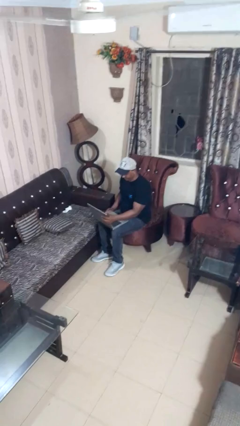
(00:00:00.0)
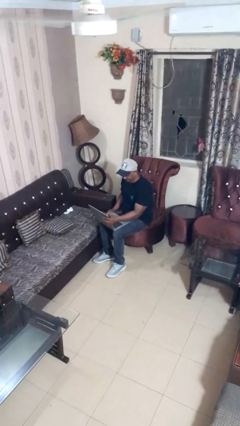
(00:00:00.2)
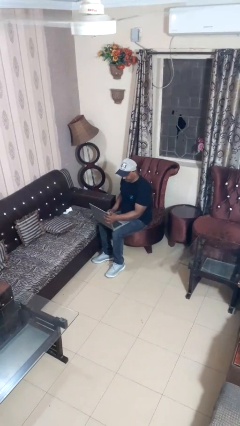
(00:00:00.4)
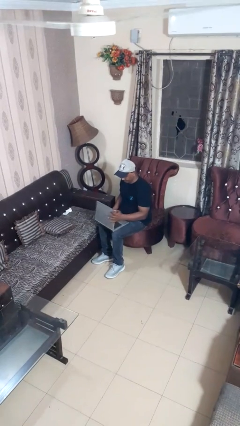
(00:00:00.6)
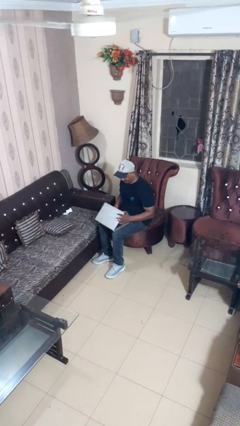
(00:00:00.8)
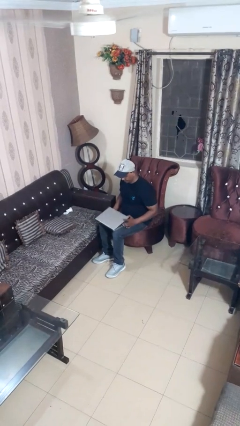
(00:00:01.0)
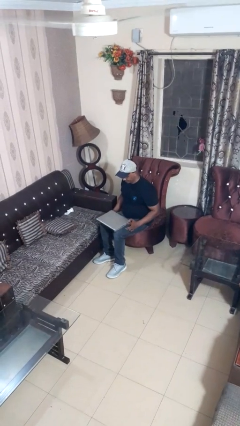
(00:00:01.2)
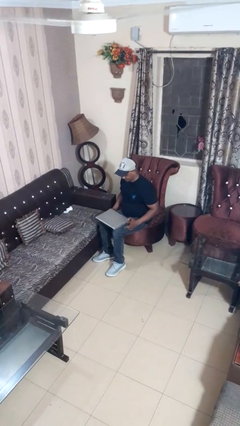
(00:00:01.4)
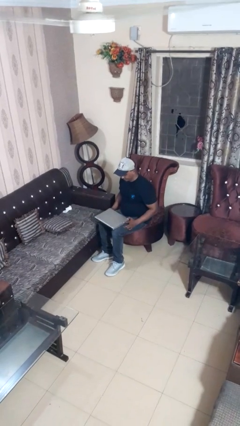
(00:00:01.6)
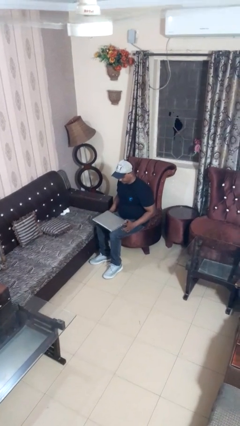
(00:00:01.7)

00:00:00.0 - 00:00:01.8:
person closes laptop

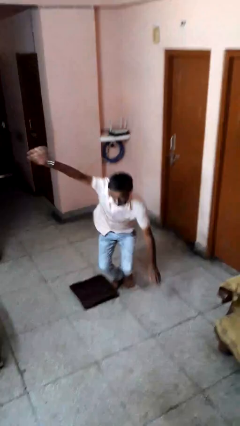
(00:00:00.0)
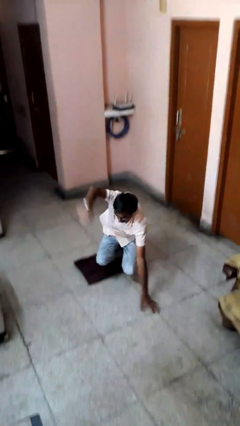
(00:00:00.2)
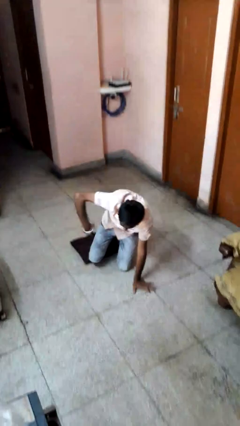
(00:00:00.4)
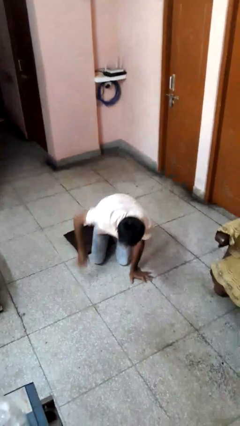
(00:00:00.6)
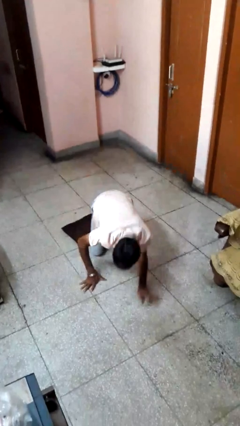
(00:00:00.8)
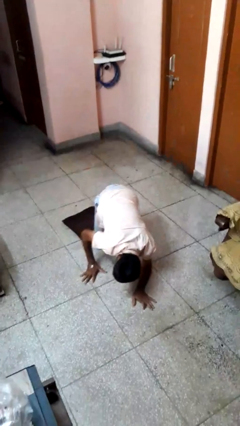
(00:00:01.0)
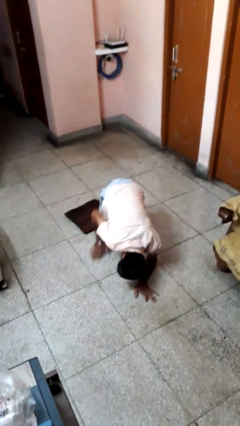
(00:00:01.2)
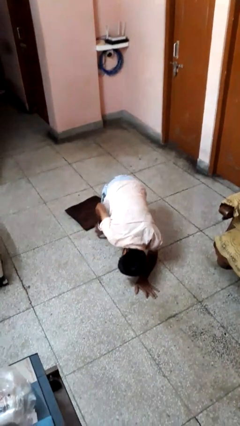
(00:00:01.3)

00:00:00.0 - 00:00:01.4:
person trips on object on floor

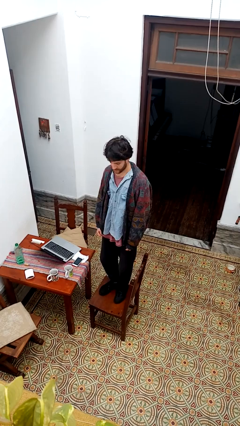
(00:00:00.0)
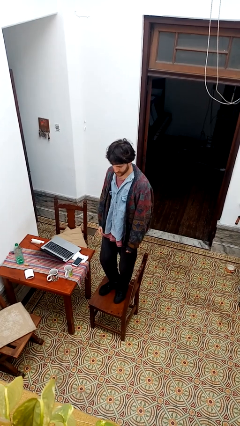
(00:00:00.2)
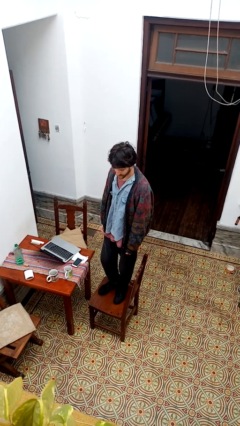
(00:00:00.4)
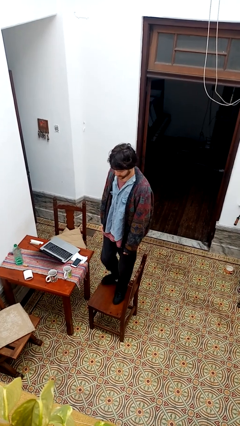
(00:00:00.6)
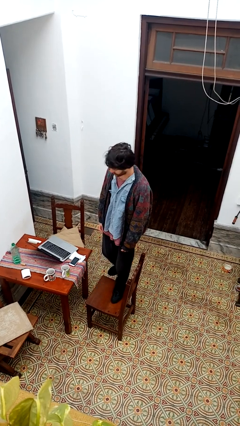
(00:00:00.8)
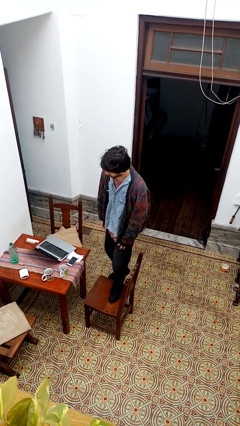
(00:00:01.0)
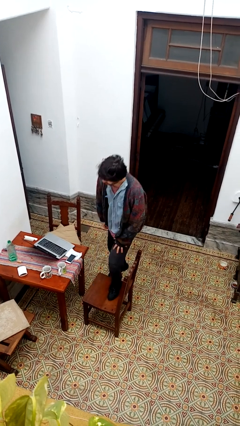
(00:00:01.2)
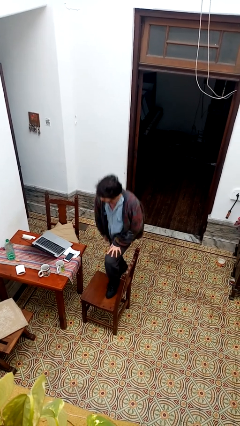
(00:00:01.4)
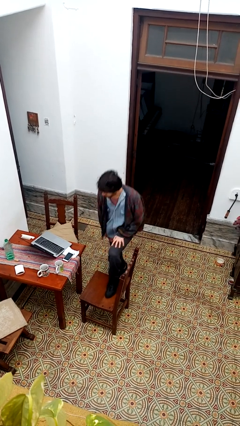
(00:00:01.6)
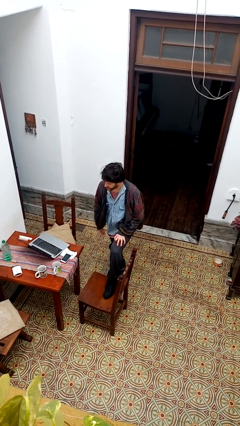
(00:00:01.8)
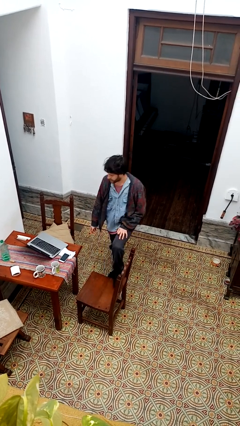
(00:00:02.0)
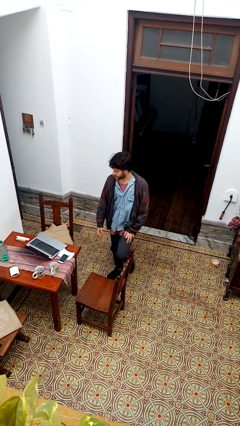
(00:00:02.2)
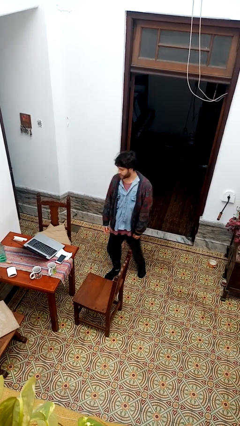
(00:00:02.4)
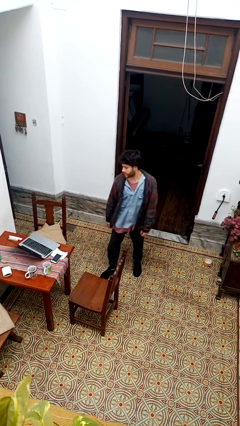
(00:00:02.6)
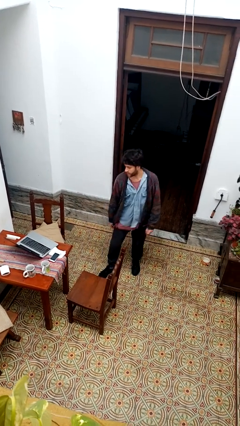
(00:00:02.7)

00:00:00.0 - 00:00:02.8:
person climbs off chair

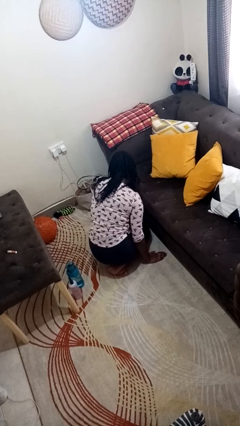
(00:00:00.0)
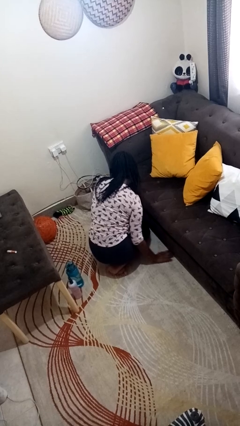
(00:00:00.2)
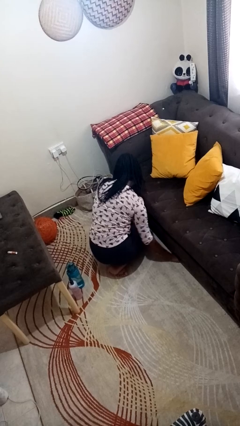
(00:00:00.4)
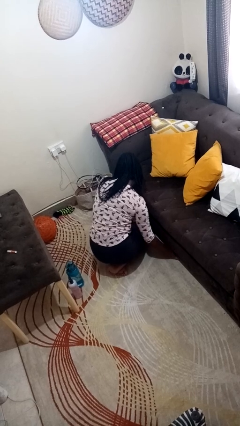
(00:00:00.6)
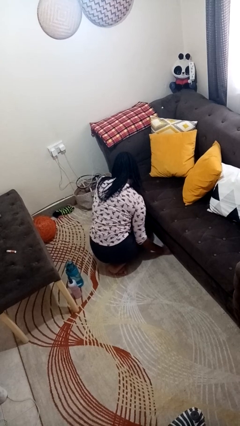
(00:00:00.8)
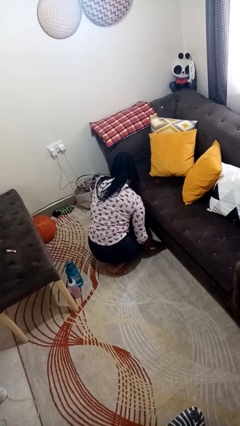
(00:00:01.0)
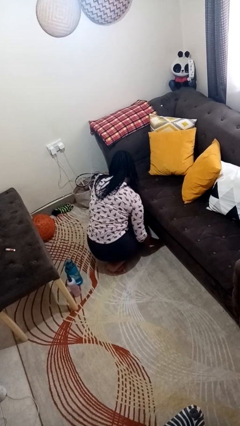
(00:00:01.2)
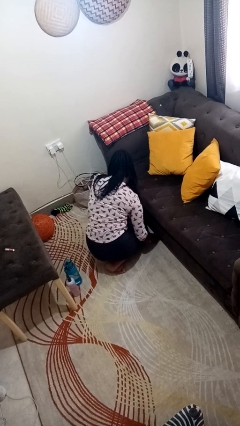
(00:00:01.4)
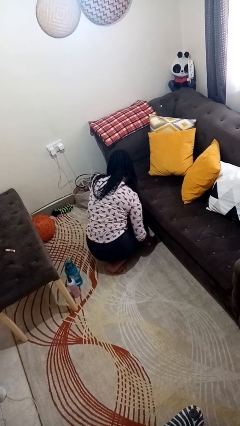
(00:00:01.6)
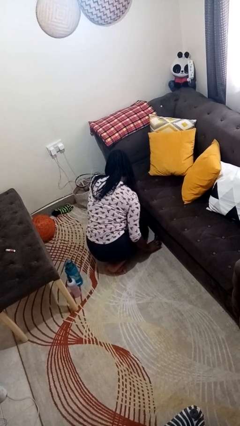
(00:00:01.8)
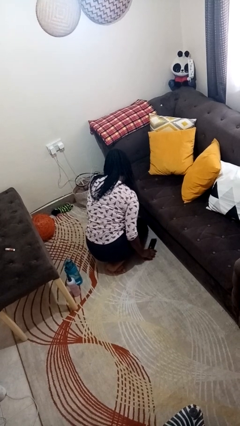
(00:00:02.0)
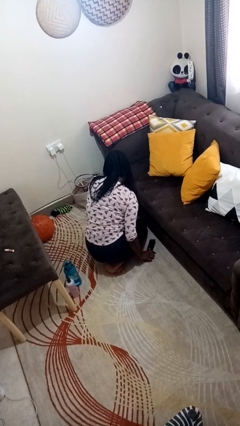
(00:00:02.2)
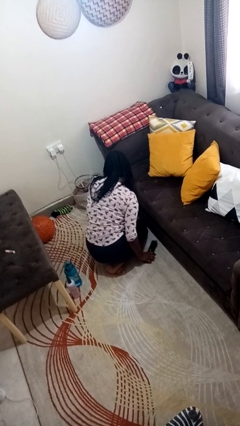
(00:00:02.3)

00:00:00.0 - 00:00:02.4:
person searches under couch

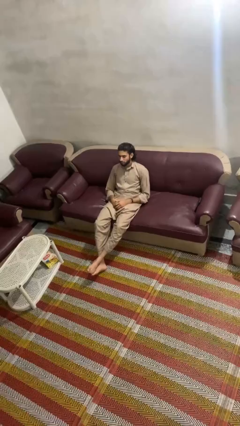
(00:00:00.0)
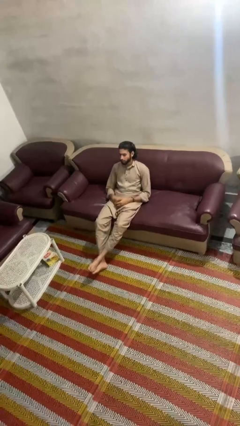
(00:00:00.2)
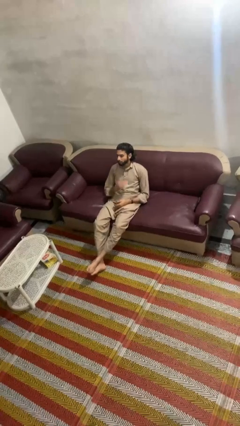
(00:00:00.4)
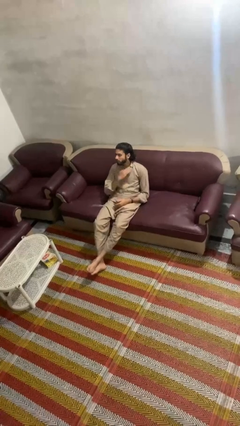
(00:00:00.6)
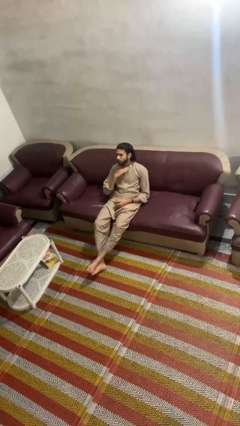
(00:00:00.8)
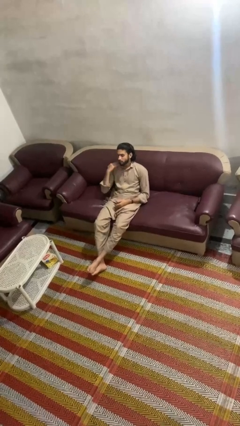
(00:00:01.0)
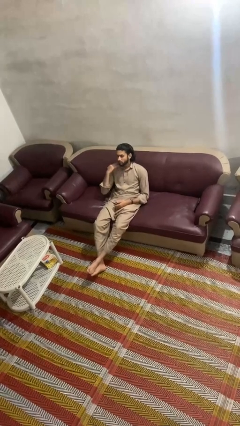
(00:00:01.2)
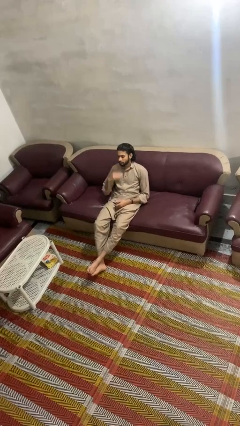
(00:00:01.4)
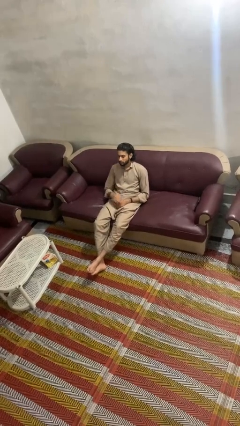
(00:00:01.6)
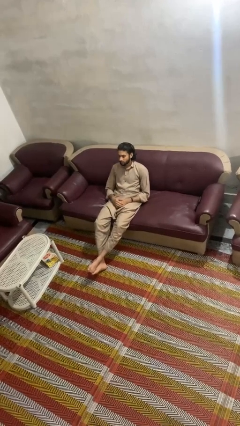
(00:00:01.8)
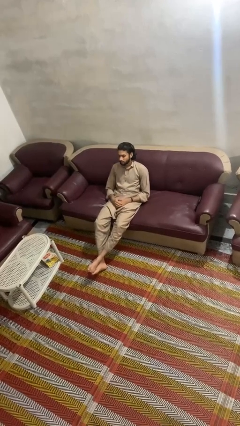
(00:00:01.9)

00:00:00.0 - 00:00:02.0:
person gestures cut

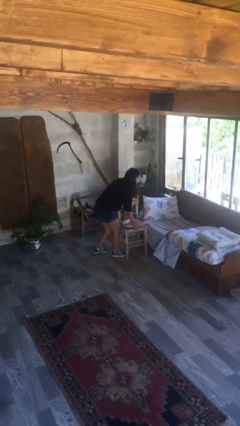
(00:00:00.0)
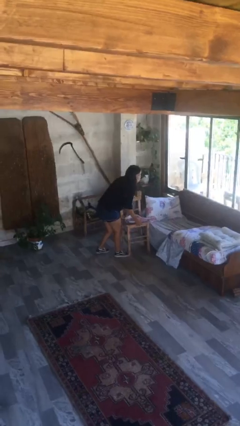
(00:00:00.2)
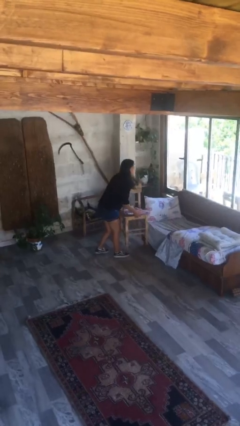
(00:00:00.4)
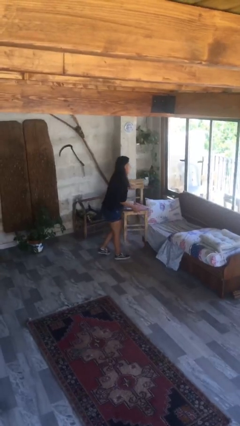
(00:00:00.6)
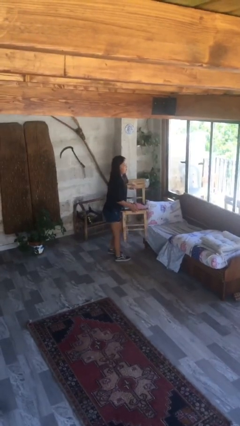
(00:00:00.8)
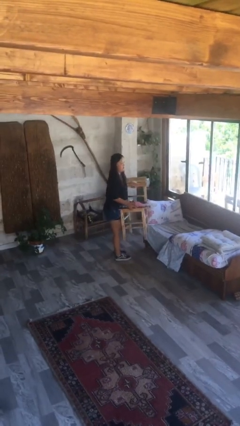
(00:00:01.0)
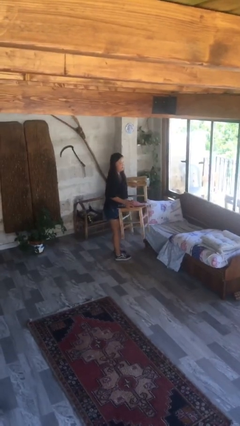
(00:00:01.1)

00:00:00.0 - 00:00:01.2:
person picks up object from floor

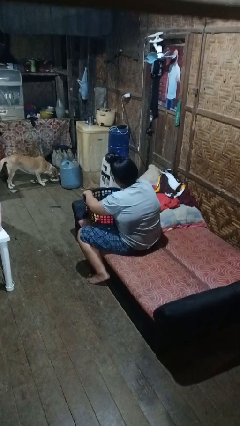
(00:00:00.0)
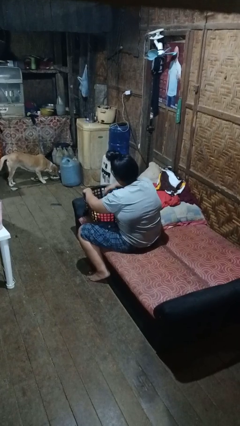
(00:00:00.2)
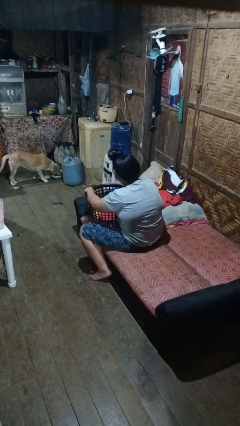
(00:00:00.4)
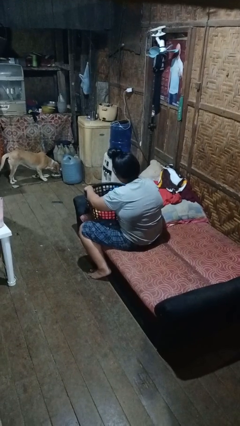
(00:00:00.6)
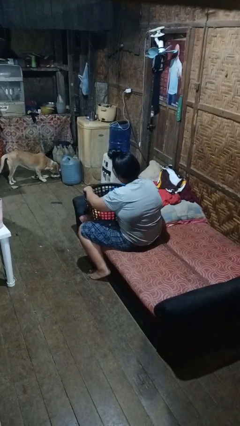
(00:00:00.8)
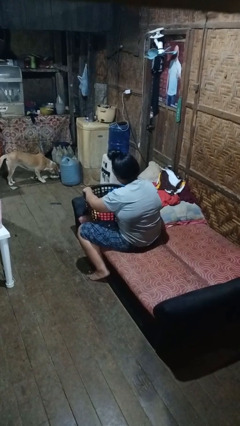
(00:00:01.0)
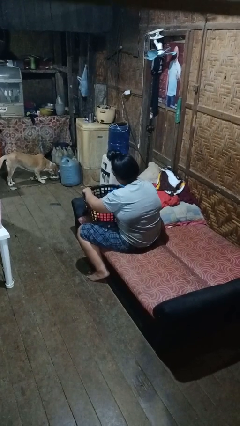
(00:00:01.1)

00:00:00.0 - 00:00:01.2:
person puts object into basket

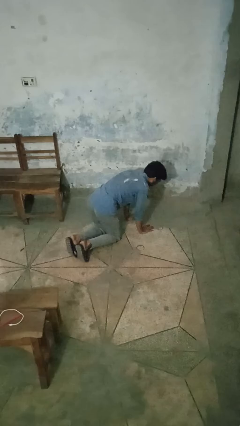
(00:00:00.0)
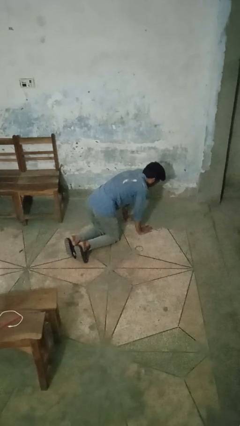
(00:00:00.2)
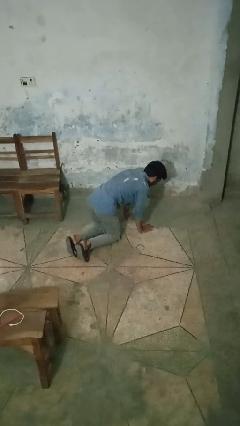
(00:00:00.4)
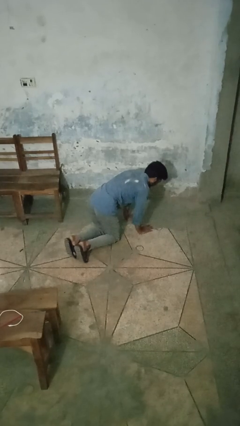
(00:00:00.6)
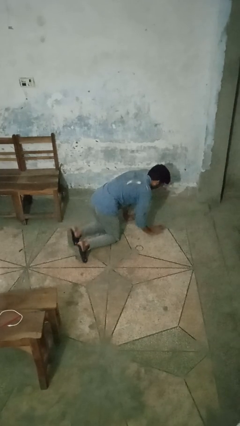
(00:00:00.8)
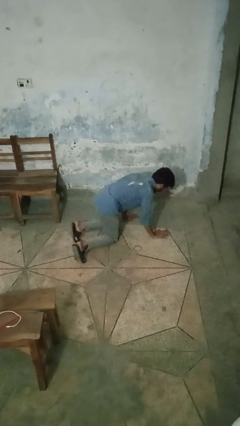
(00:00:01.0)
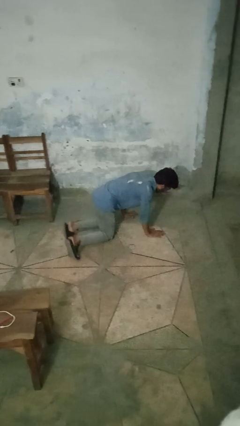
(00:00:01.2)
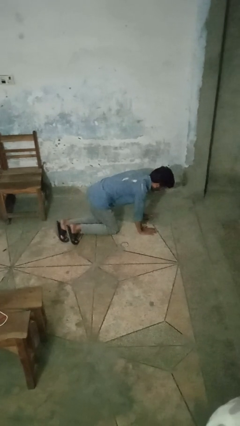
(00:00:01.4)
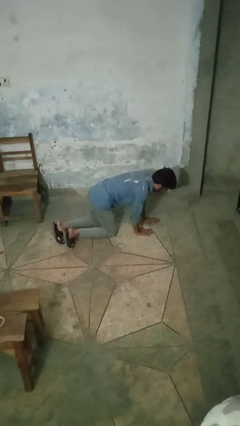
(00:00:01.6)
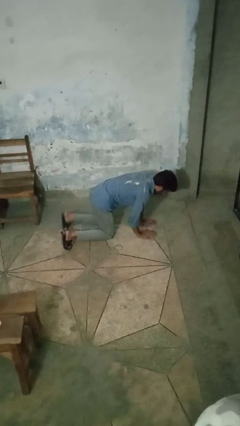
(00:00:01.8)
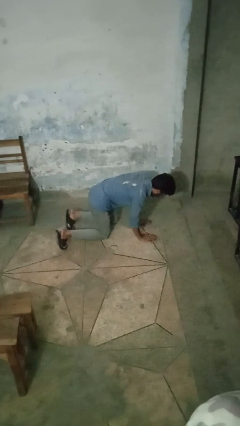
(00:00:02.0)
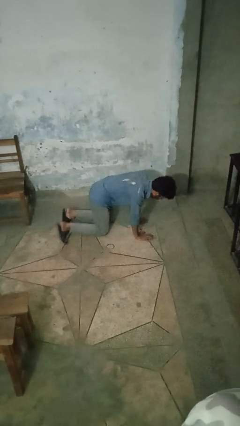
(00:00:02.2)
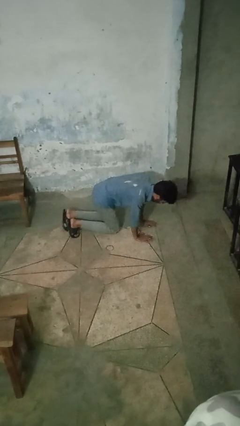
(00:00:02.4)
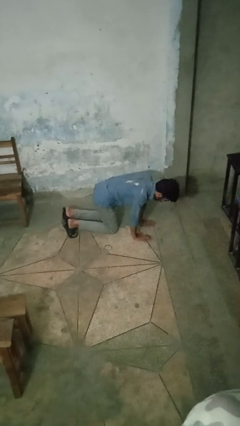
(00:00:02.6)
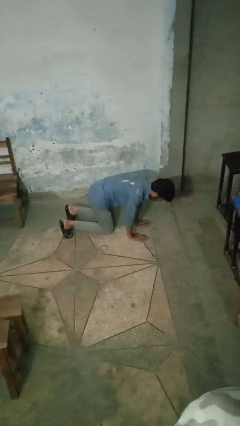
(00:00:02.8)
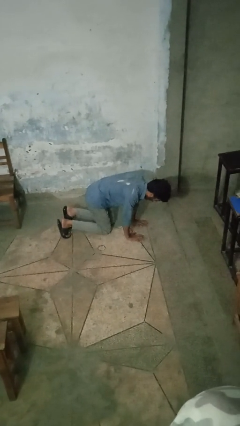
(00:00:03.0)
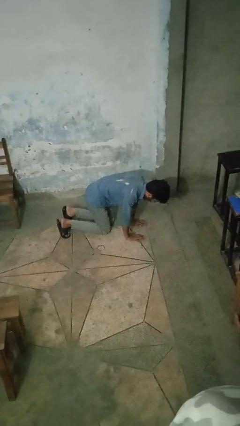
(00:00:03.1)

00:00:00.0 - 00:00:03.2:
person crawls

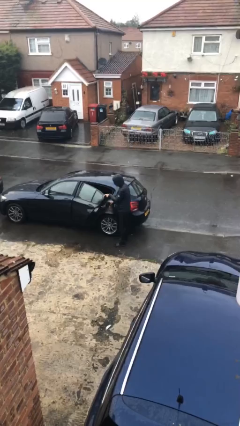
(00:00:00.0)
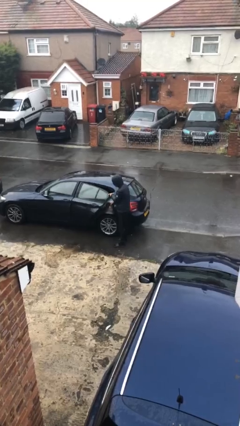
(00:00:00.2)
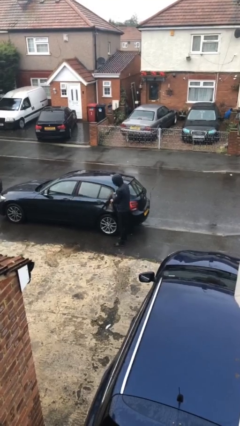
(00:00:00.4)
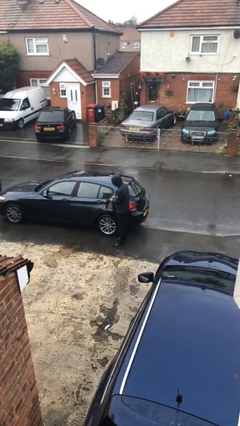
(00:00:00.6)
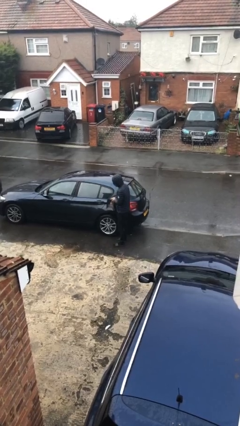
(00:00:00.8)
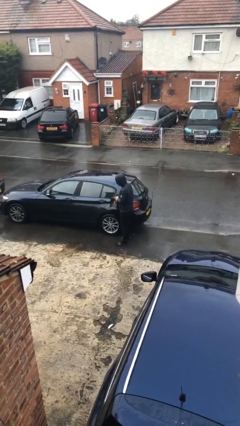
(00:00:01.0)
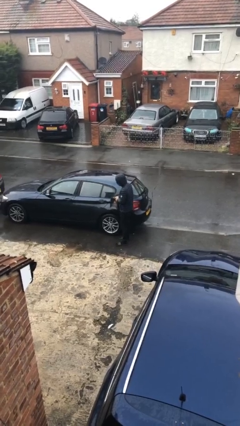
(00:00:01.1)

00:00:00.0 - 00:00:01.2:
person closes car door
